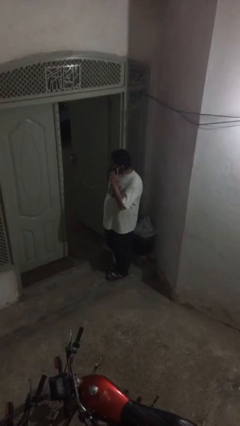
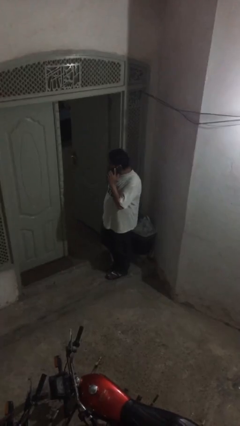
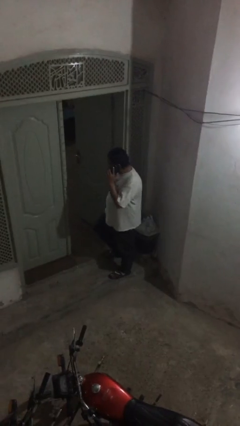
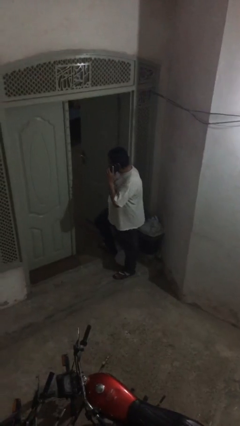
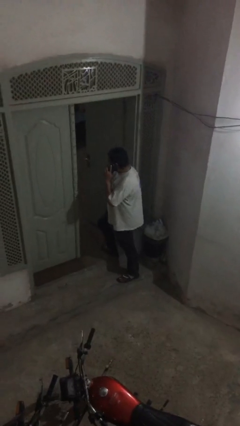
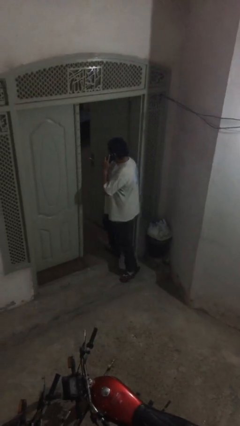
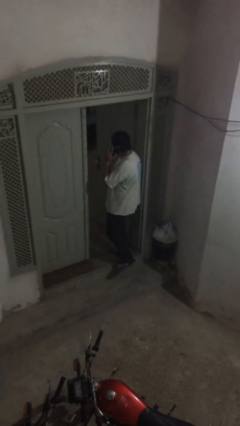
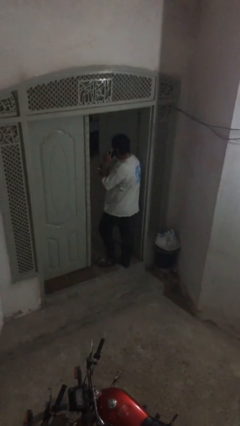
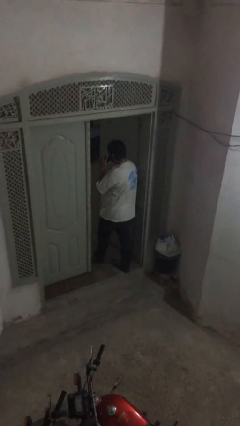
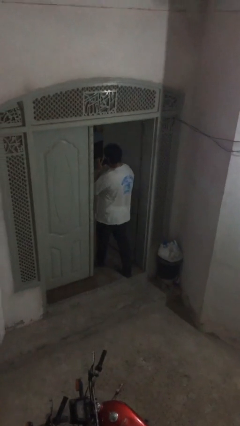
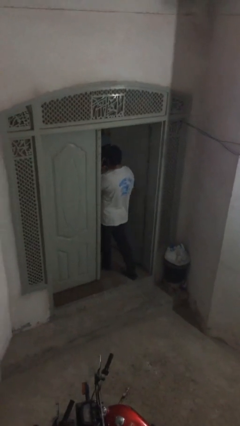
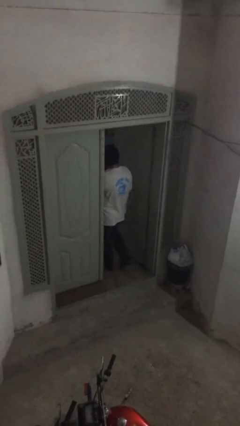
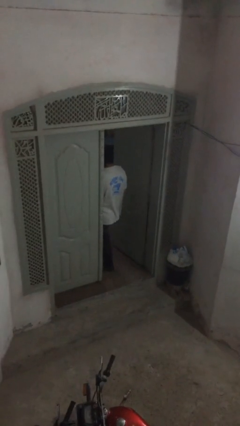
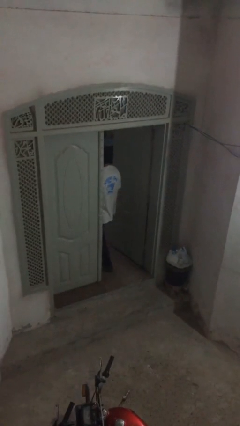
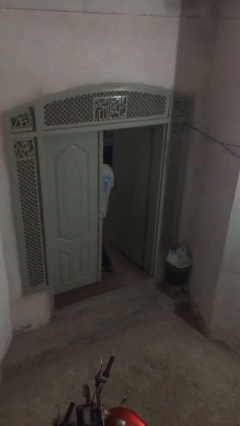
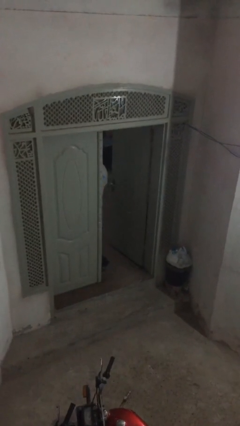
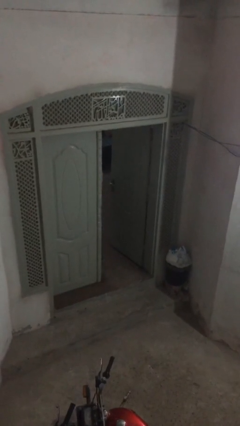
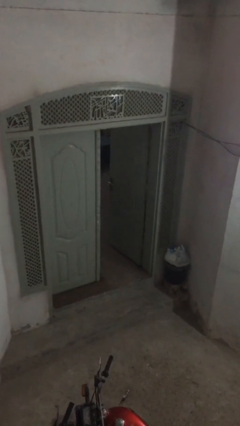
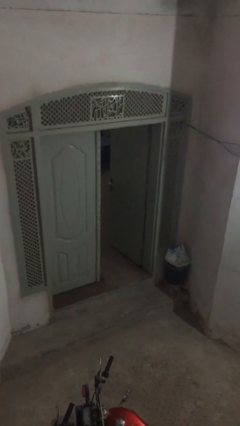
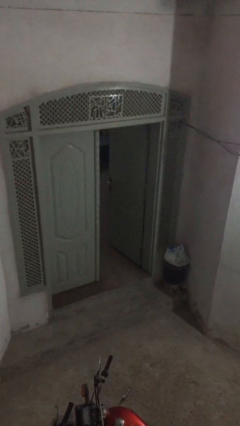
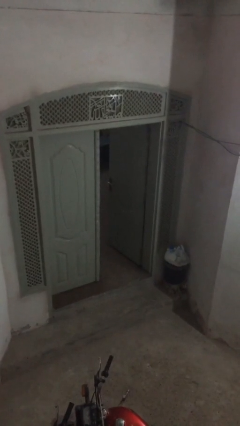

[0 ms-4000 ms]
person exits scene through structure

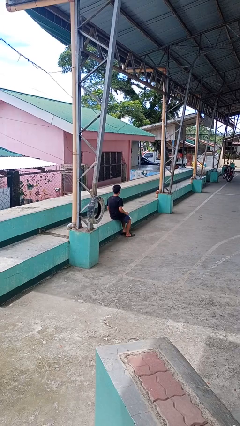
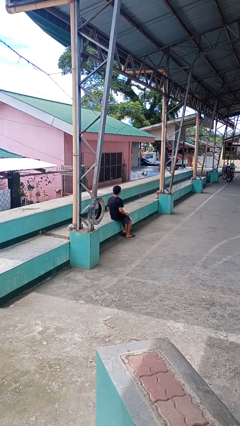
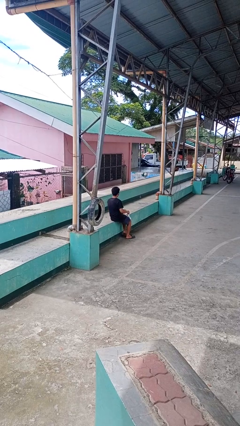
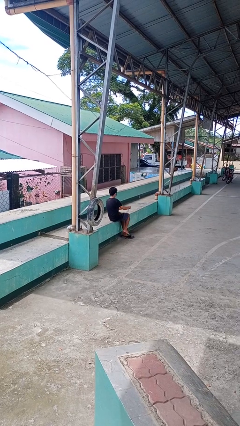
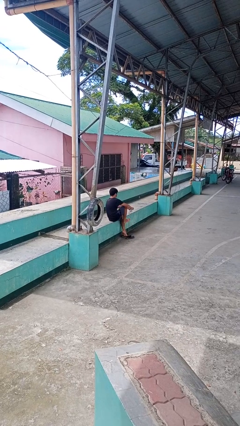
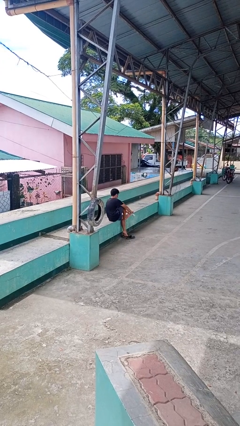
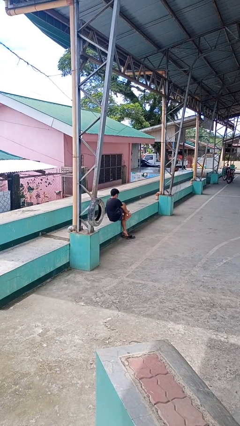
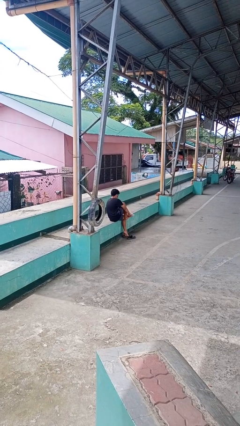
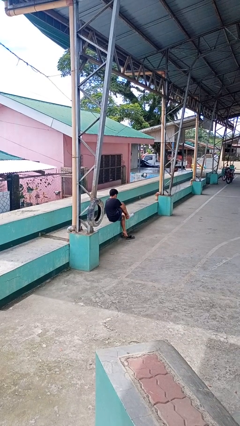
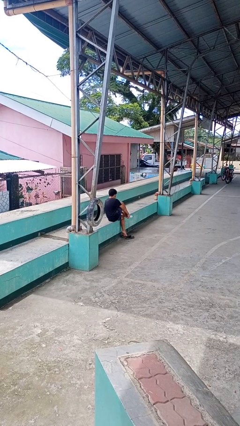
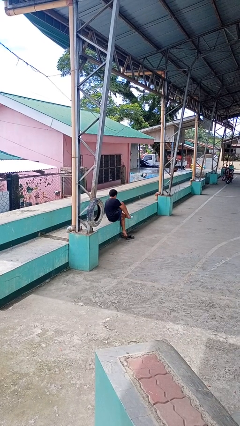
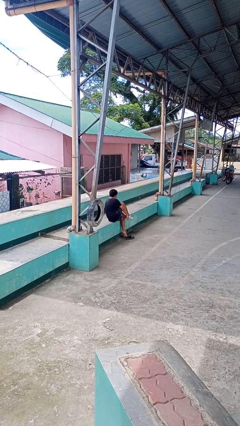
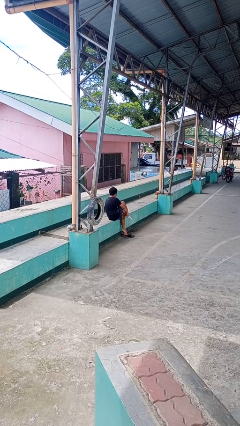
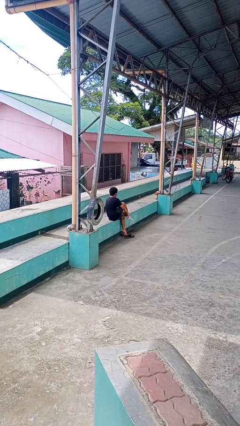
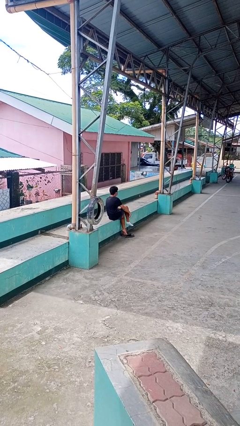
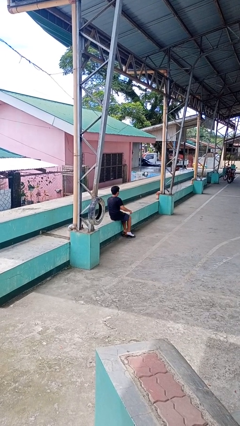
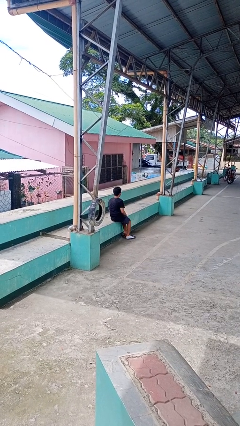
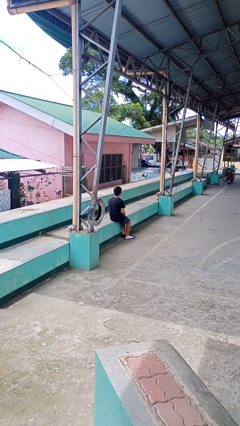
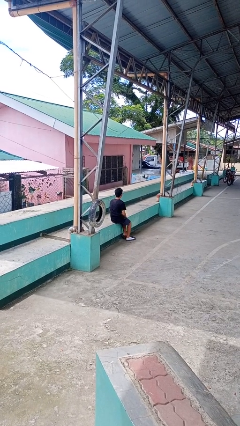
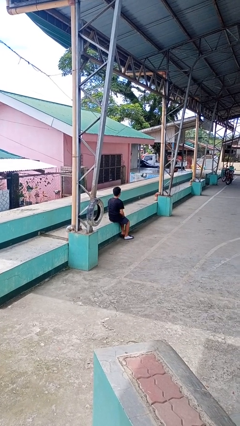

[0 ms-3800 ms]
person puts on socks

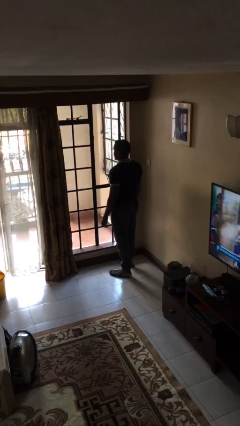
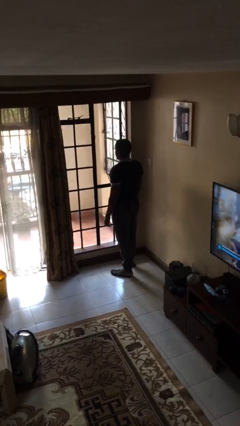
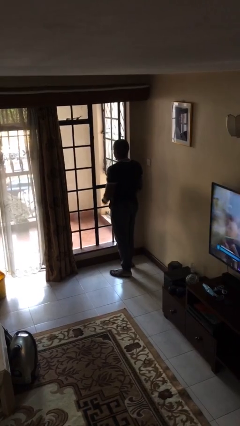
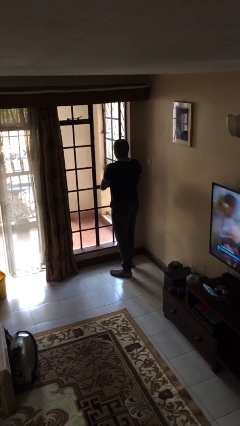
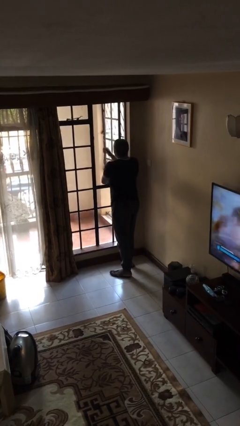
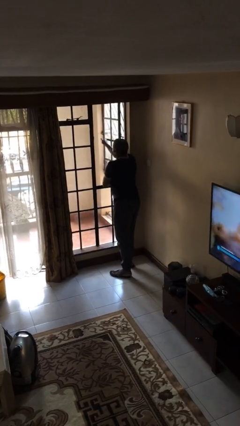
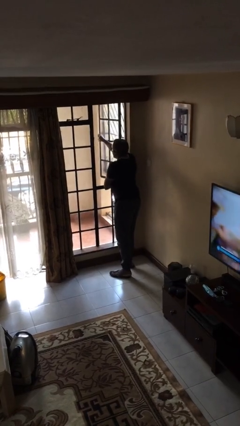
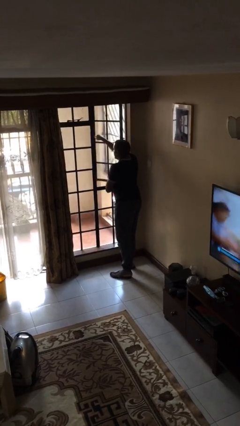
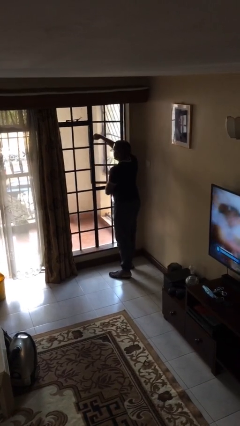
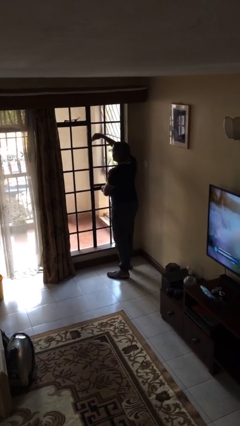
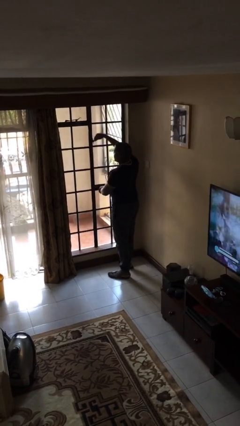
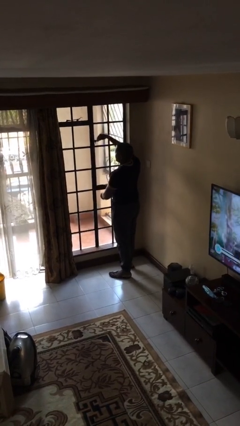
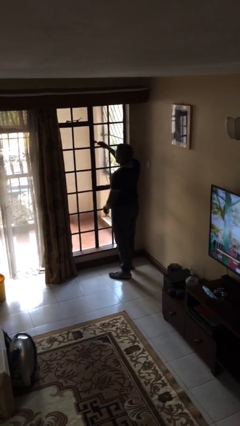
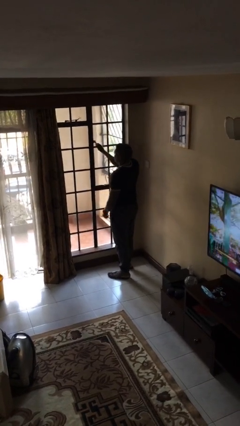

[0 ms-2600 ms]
person closes home window

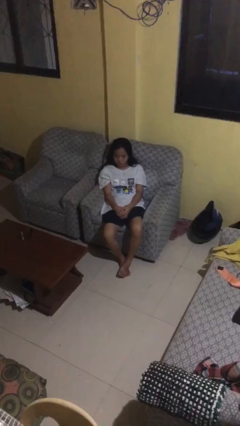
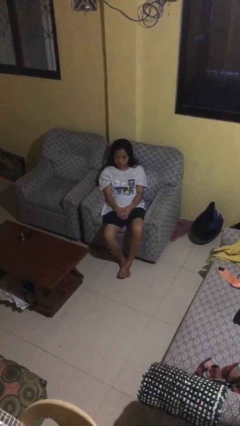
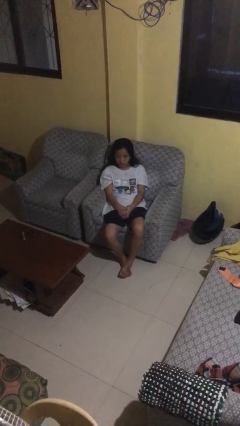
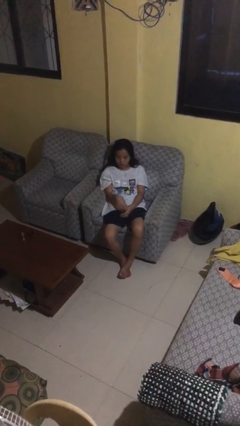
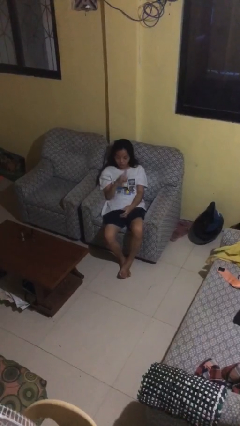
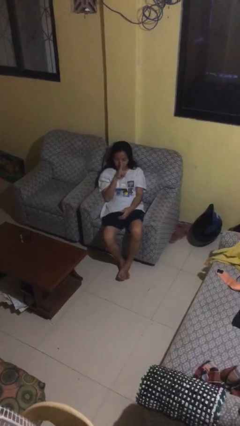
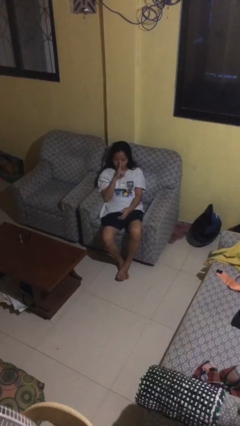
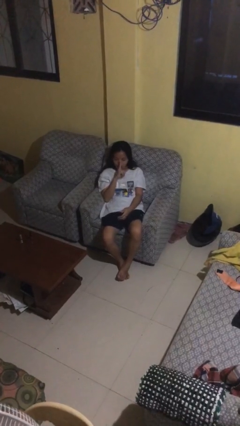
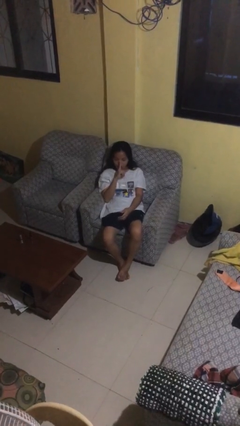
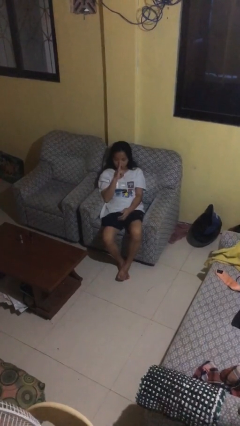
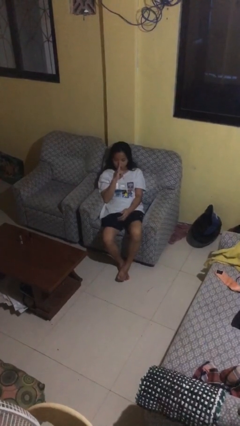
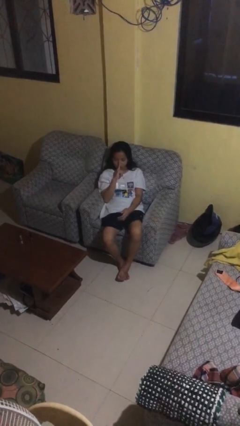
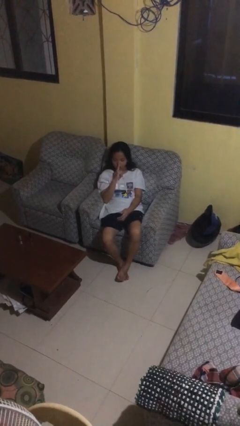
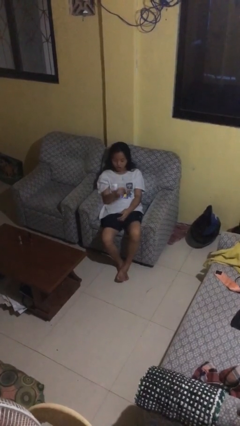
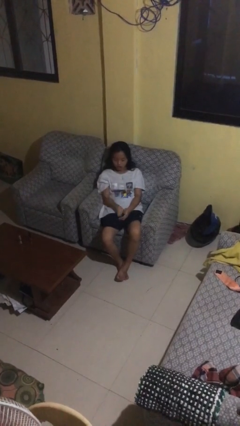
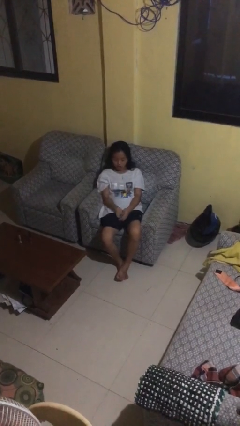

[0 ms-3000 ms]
person gestures be quiet

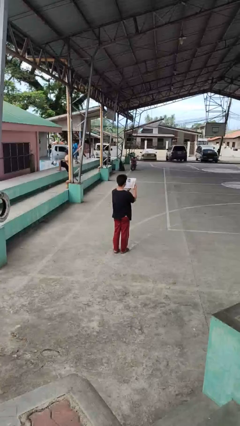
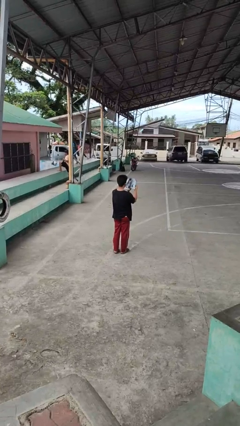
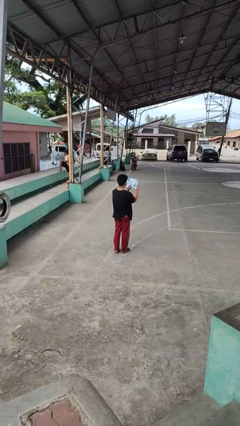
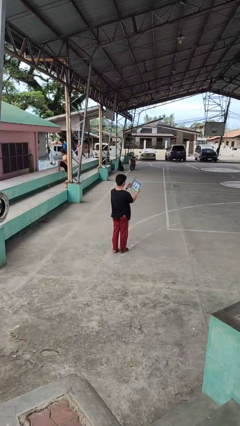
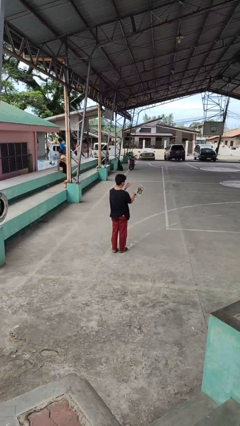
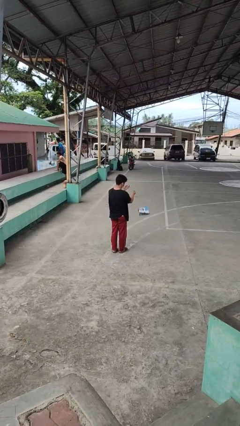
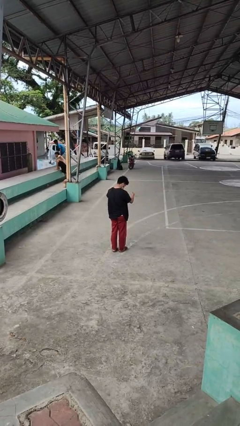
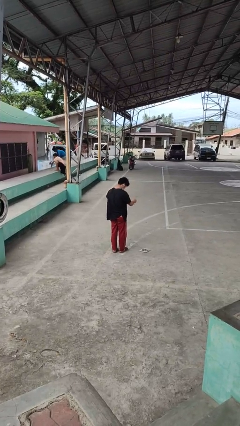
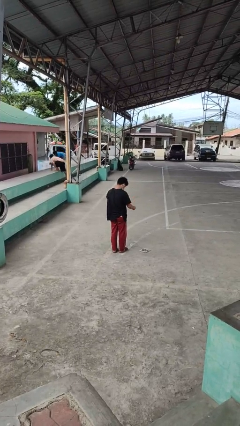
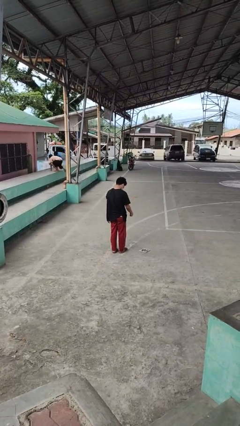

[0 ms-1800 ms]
person drops object

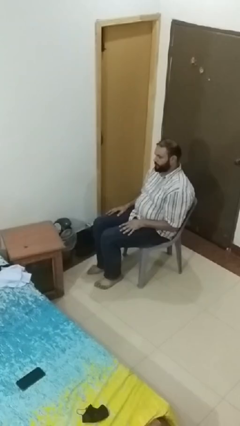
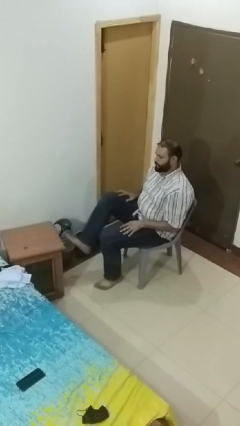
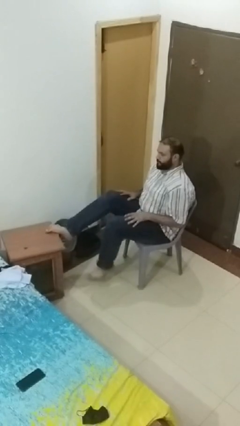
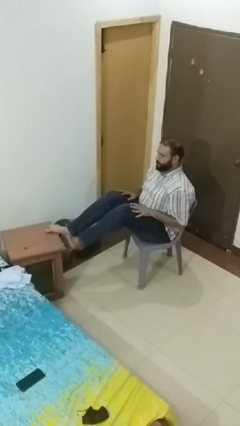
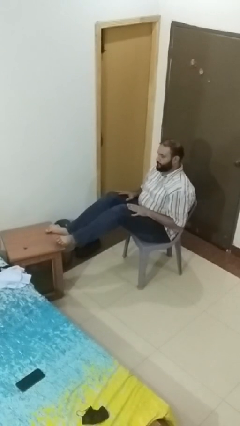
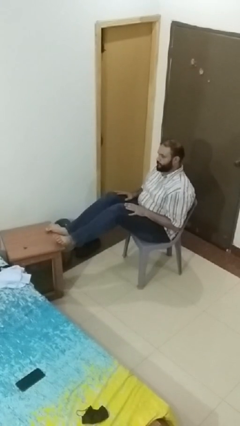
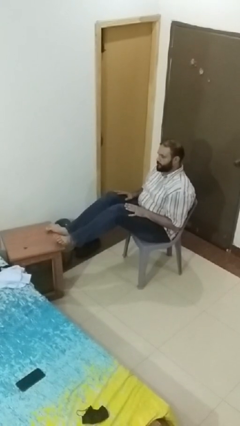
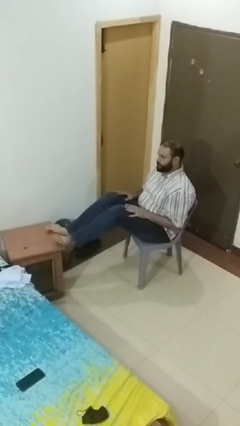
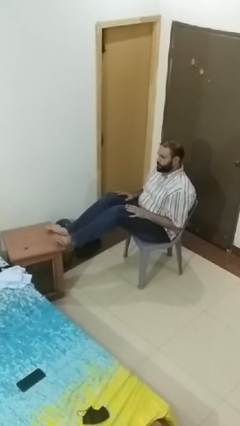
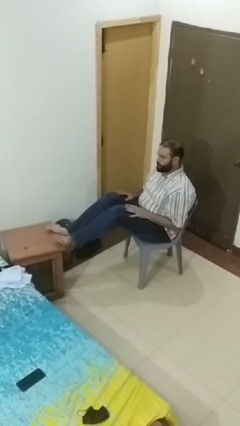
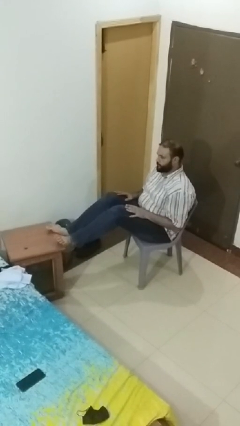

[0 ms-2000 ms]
person puts feet up
